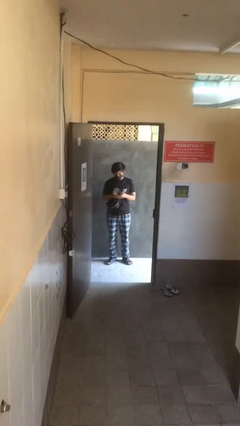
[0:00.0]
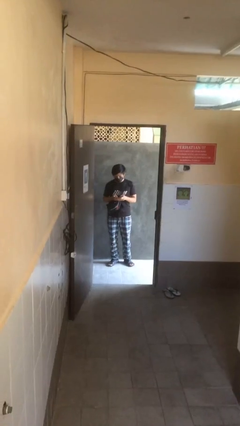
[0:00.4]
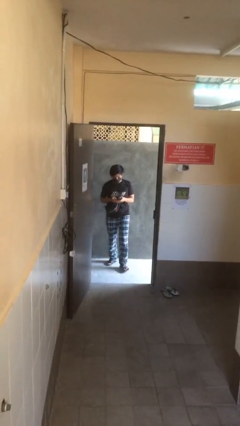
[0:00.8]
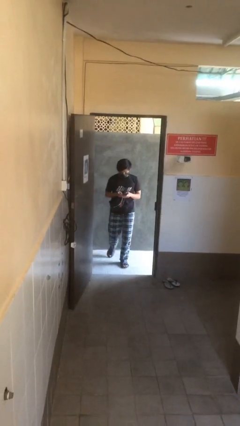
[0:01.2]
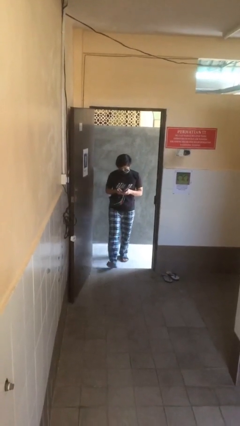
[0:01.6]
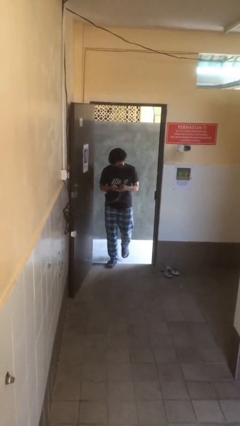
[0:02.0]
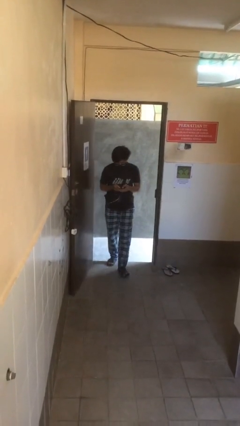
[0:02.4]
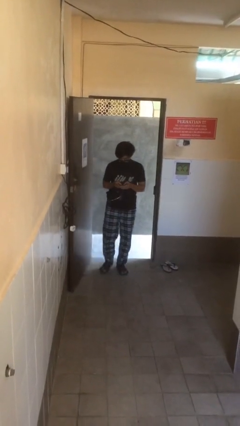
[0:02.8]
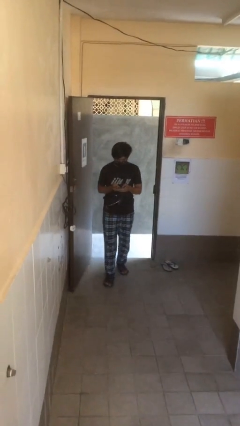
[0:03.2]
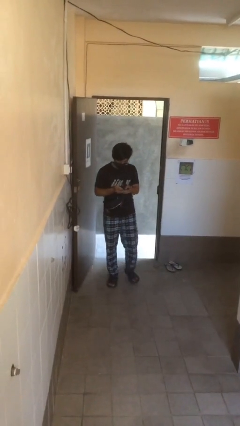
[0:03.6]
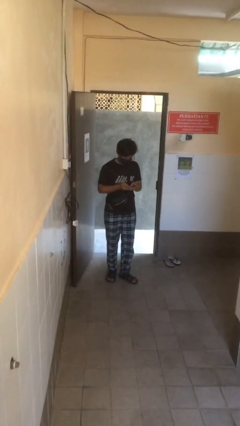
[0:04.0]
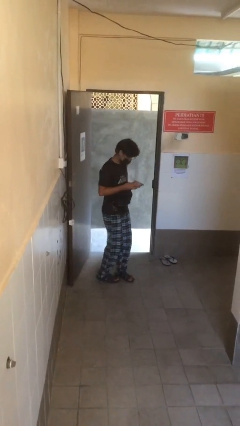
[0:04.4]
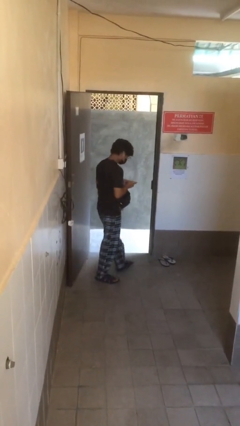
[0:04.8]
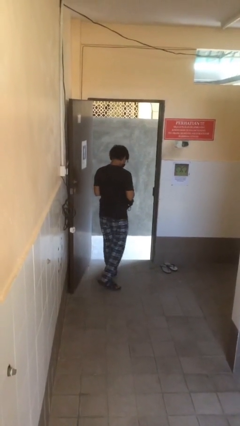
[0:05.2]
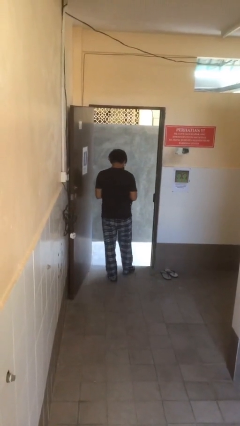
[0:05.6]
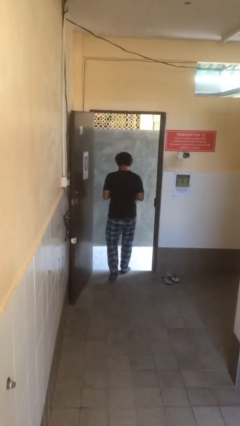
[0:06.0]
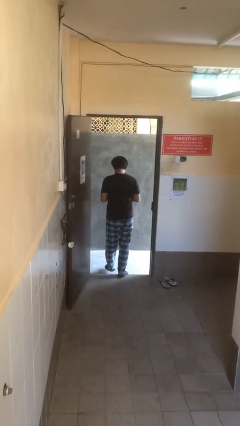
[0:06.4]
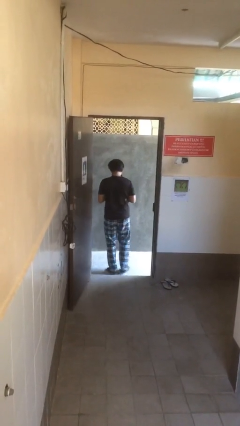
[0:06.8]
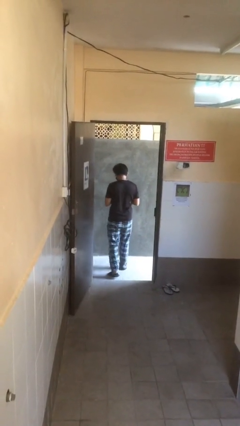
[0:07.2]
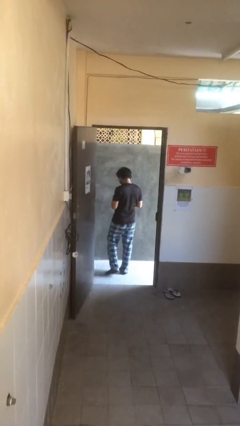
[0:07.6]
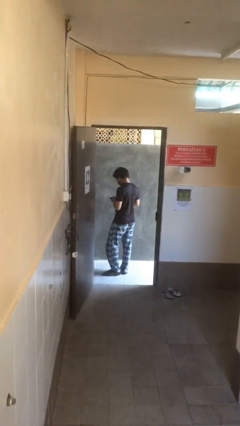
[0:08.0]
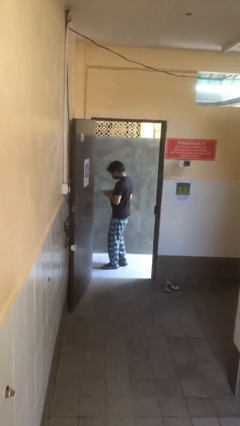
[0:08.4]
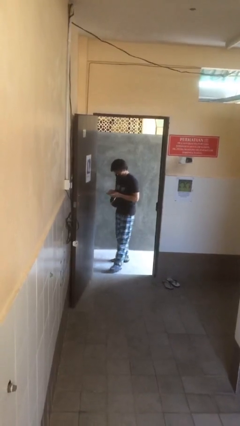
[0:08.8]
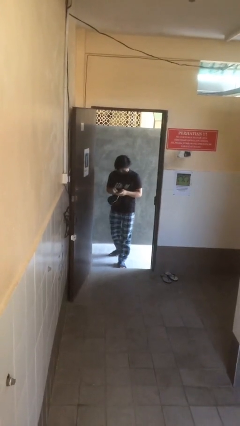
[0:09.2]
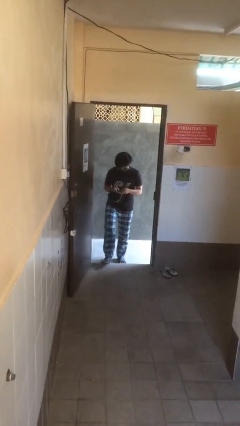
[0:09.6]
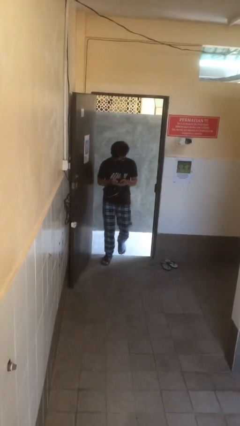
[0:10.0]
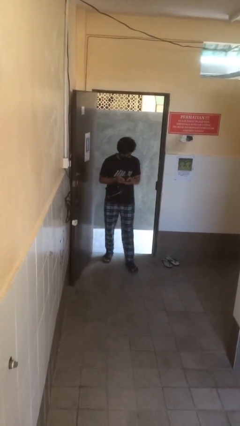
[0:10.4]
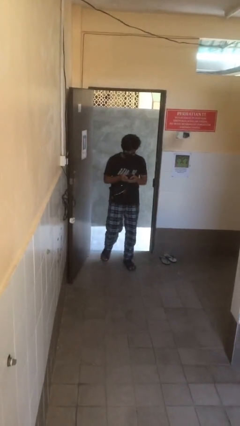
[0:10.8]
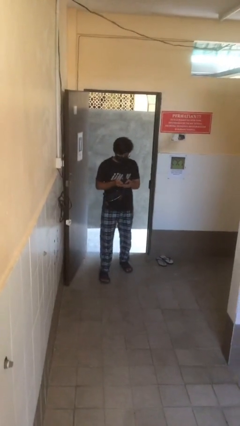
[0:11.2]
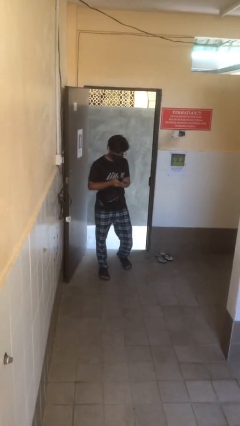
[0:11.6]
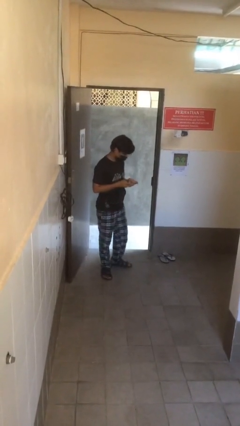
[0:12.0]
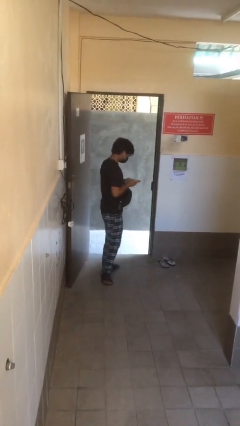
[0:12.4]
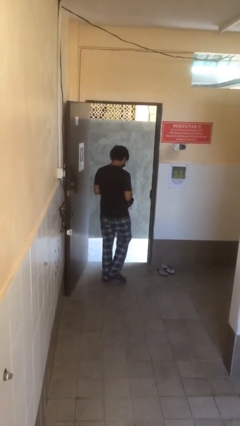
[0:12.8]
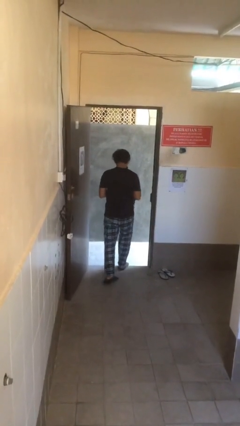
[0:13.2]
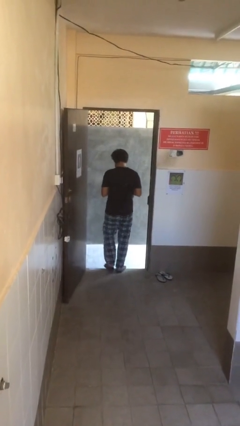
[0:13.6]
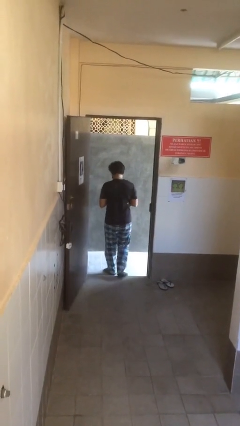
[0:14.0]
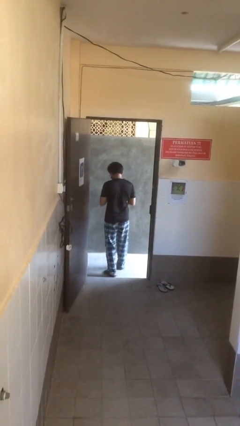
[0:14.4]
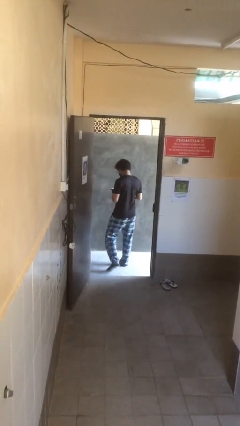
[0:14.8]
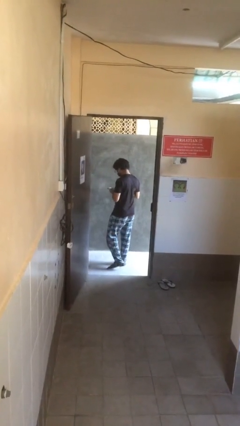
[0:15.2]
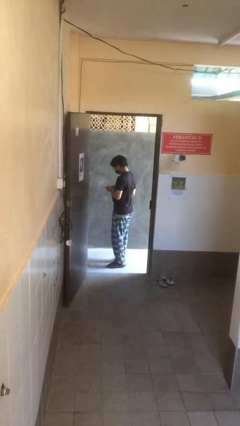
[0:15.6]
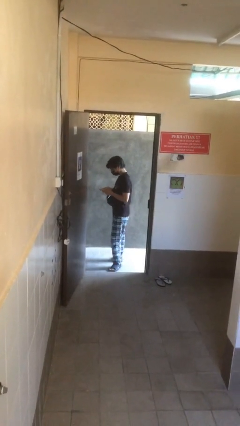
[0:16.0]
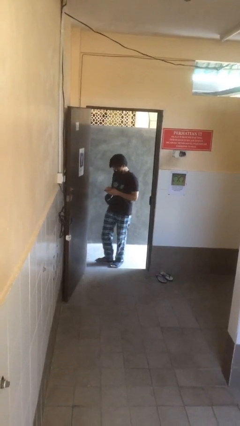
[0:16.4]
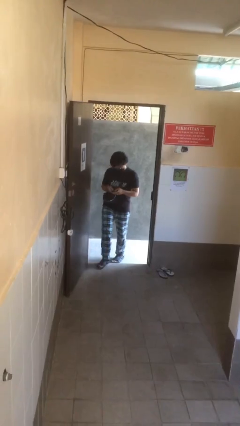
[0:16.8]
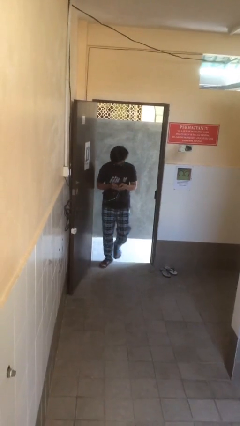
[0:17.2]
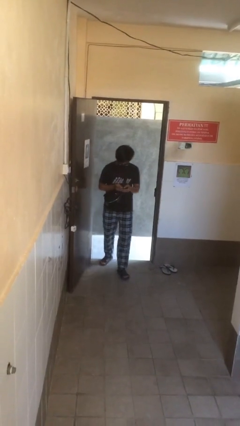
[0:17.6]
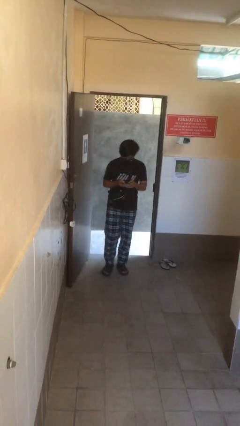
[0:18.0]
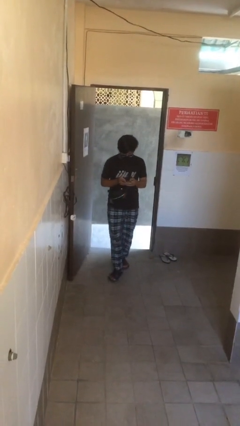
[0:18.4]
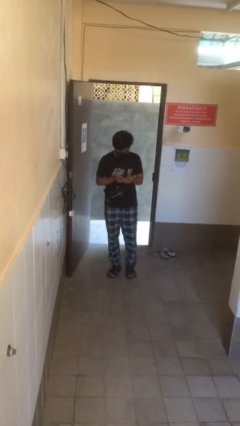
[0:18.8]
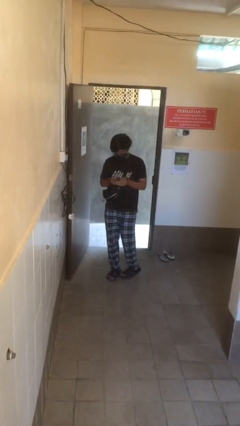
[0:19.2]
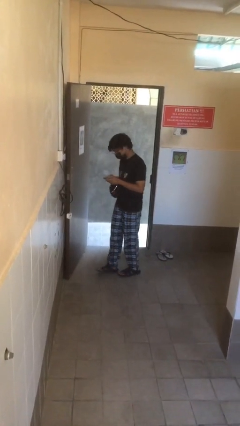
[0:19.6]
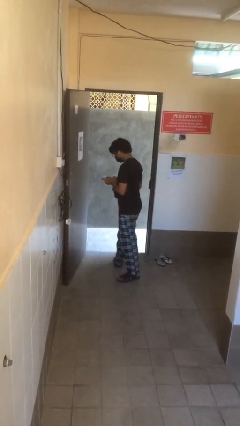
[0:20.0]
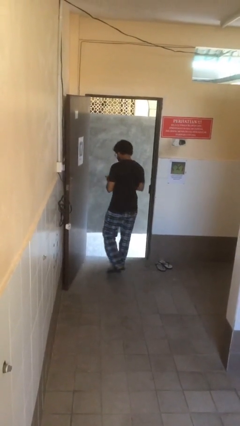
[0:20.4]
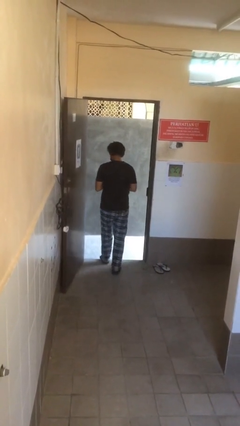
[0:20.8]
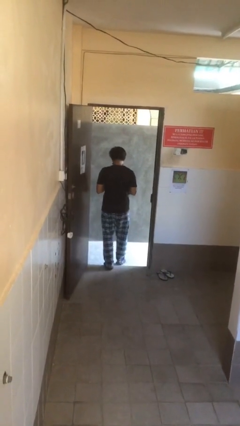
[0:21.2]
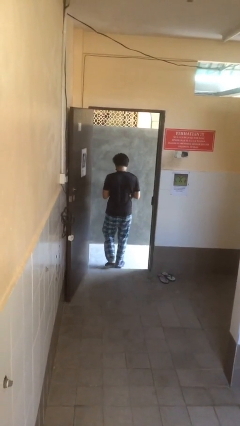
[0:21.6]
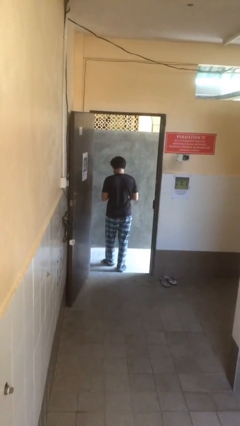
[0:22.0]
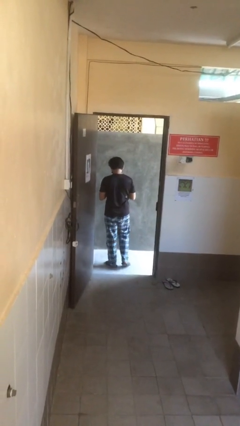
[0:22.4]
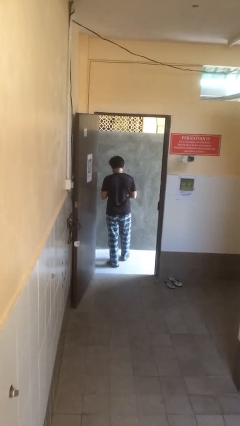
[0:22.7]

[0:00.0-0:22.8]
person texts on phone

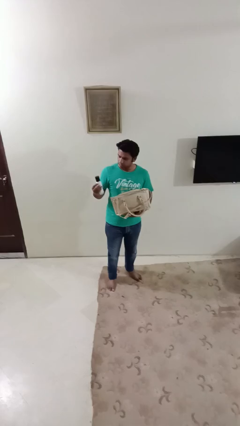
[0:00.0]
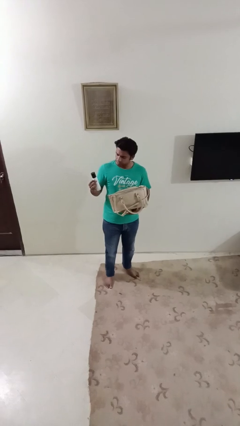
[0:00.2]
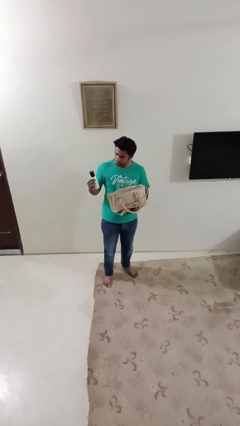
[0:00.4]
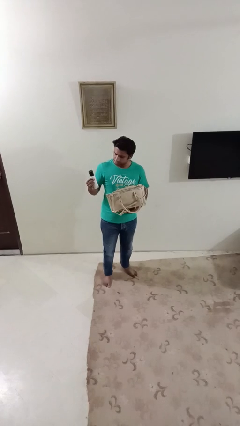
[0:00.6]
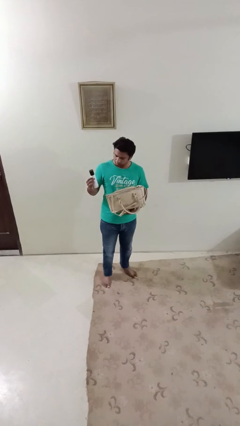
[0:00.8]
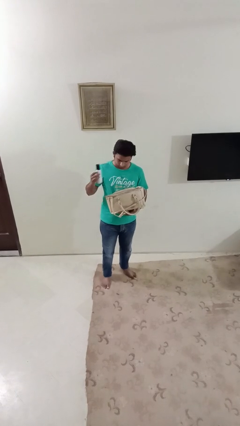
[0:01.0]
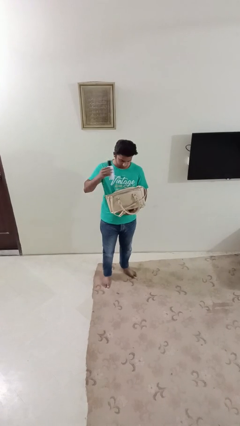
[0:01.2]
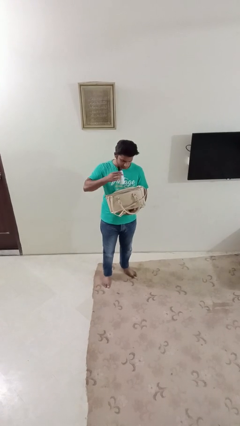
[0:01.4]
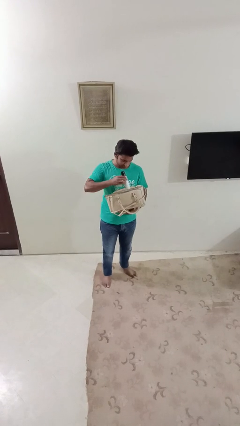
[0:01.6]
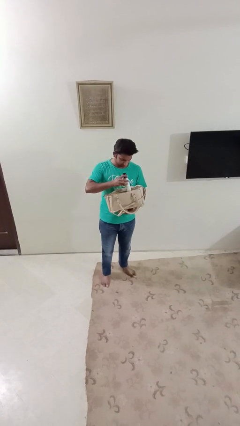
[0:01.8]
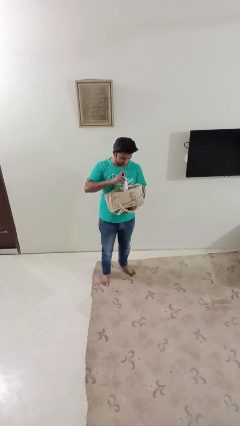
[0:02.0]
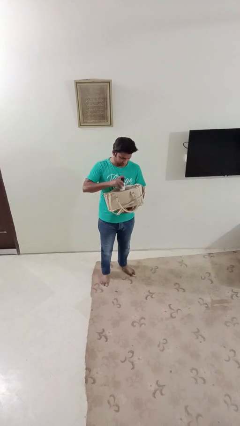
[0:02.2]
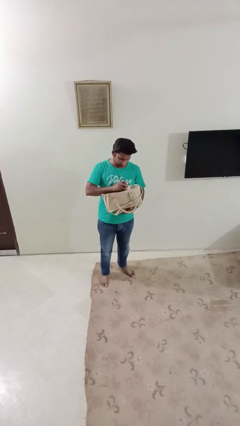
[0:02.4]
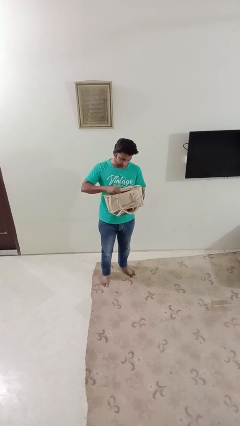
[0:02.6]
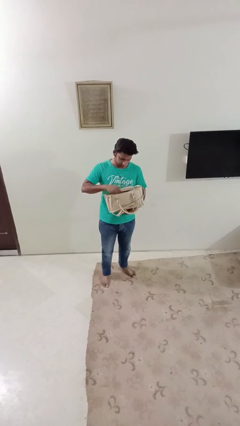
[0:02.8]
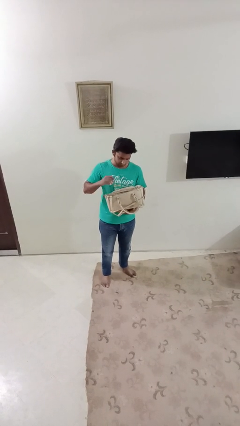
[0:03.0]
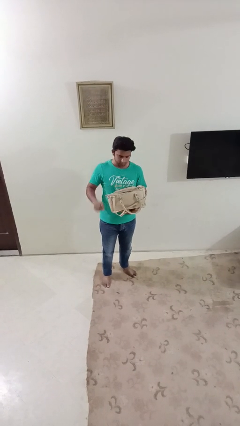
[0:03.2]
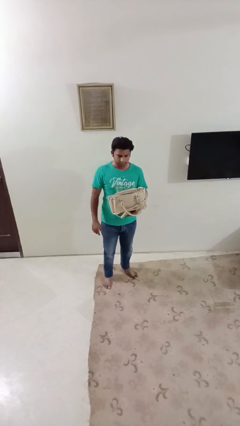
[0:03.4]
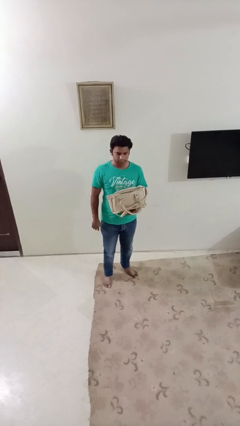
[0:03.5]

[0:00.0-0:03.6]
person puts object into purse

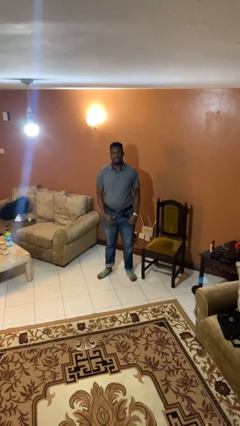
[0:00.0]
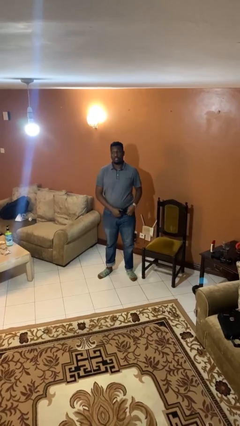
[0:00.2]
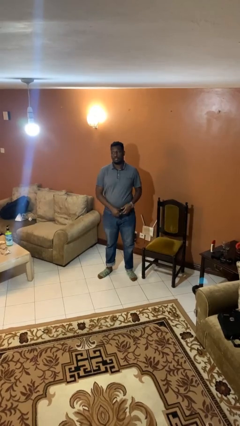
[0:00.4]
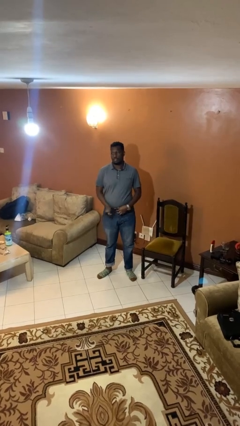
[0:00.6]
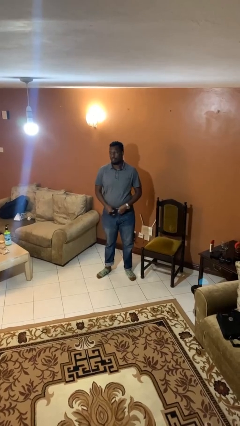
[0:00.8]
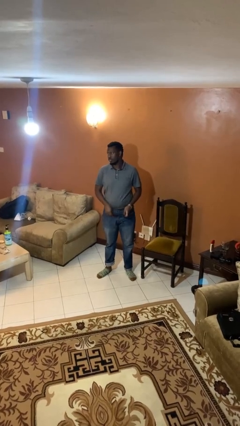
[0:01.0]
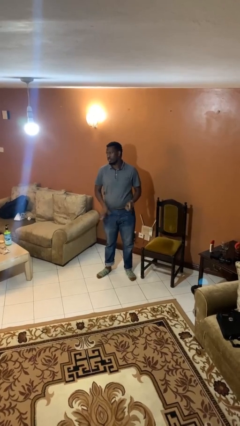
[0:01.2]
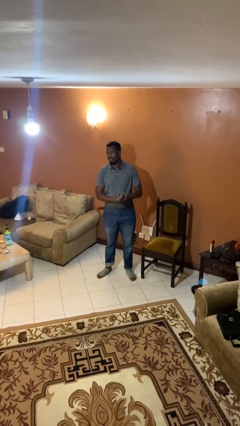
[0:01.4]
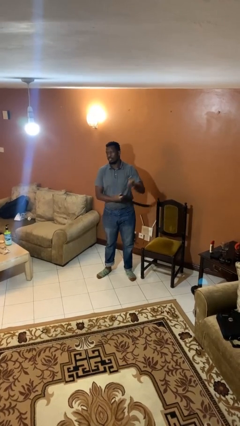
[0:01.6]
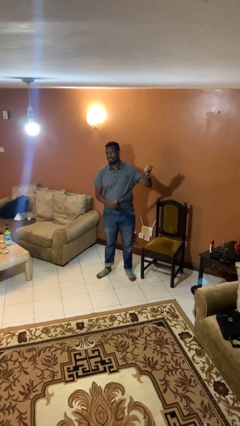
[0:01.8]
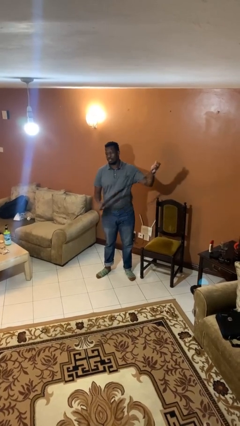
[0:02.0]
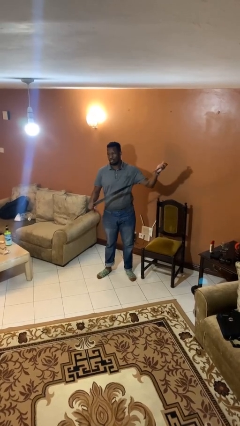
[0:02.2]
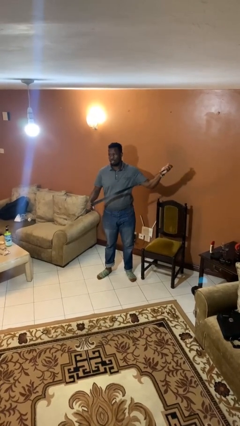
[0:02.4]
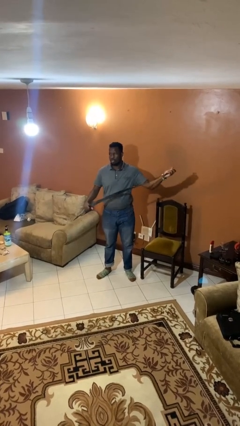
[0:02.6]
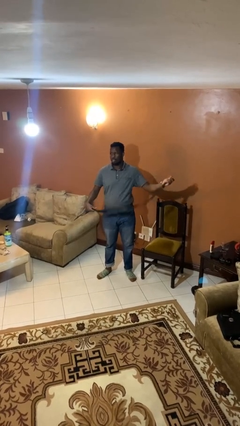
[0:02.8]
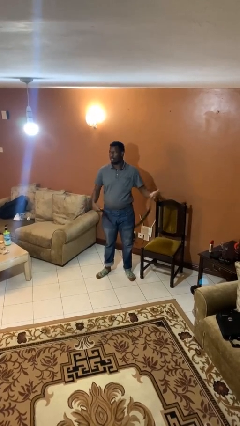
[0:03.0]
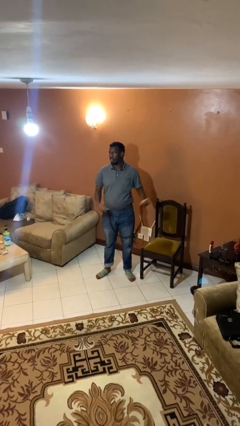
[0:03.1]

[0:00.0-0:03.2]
person takes off belt
